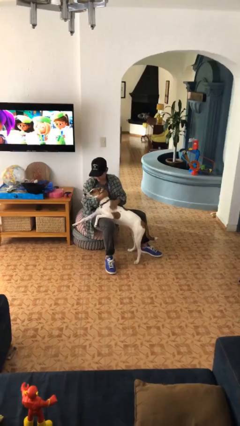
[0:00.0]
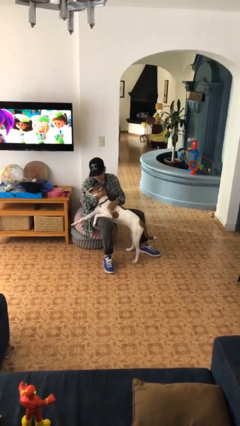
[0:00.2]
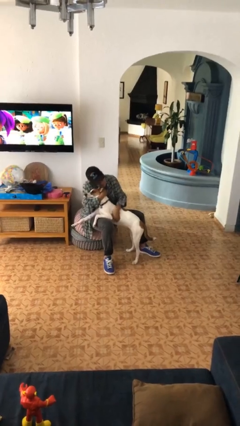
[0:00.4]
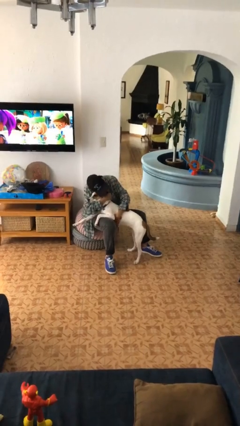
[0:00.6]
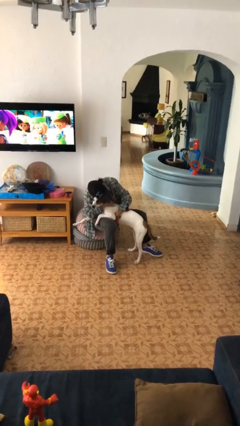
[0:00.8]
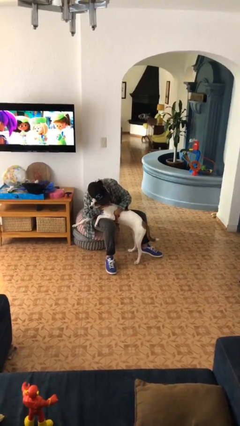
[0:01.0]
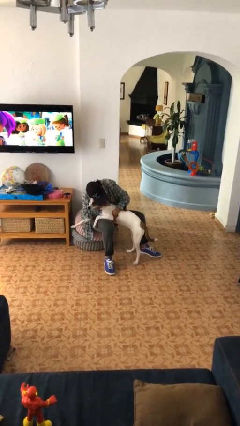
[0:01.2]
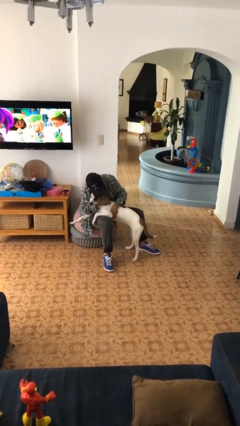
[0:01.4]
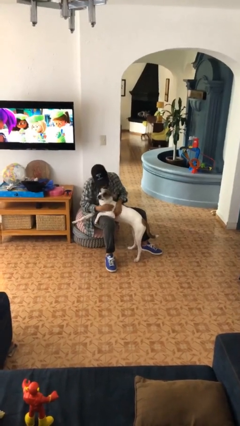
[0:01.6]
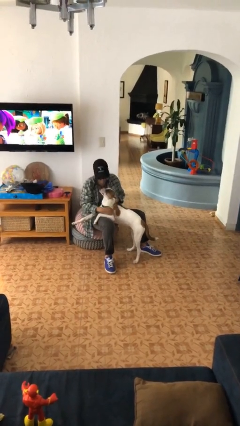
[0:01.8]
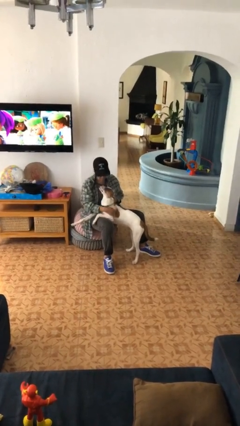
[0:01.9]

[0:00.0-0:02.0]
person hugs dog

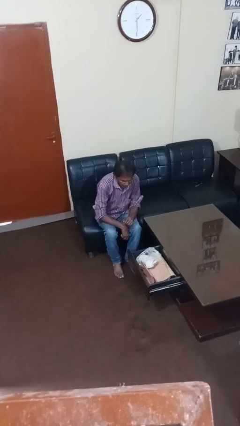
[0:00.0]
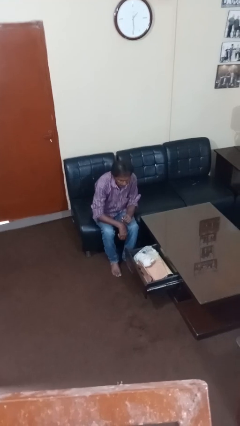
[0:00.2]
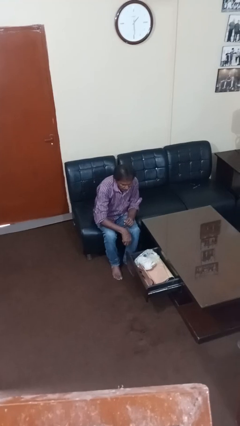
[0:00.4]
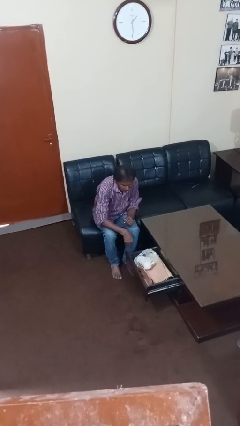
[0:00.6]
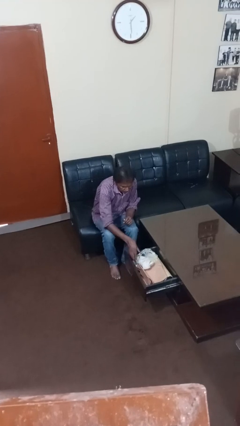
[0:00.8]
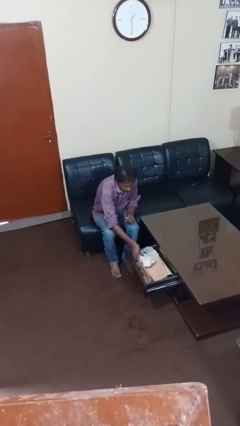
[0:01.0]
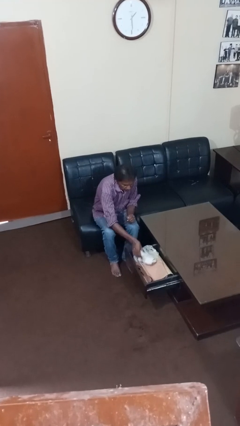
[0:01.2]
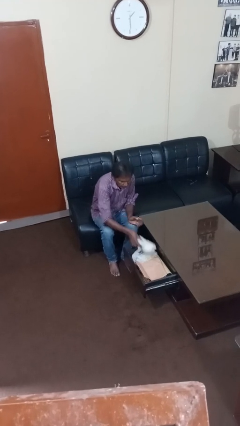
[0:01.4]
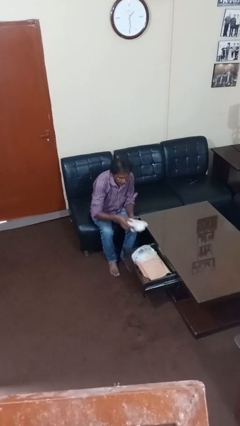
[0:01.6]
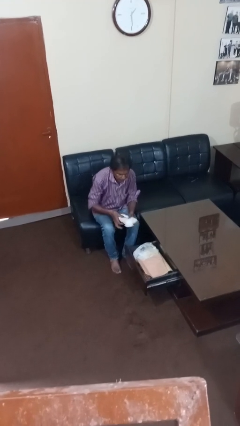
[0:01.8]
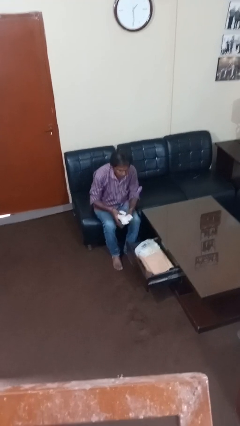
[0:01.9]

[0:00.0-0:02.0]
person takes clothes from dresser

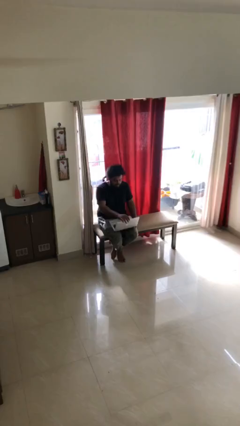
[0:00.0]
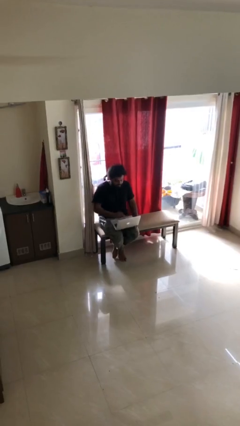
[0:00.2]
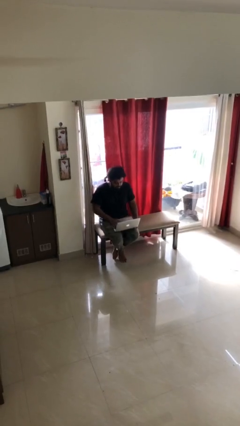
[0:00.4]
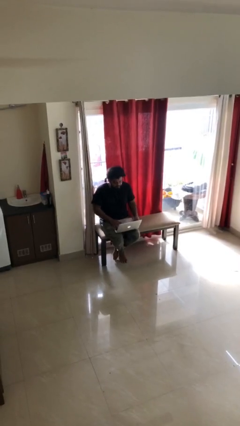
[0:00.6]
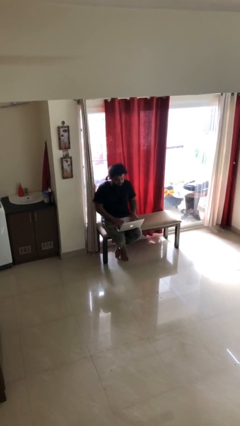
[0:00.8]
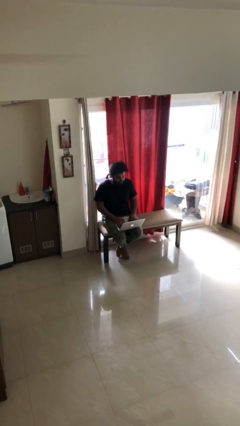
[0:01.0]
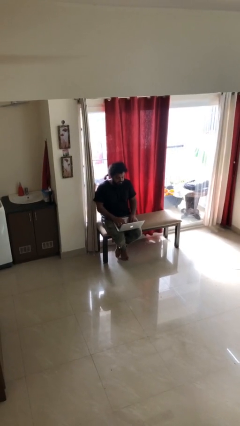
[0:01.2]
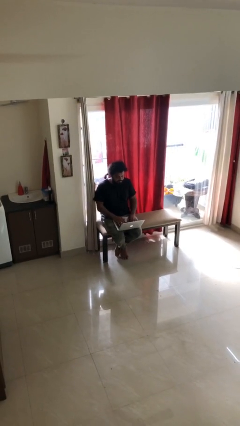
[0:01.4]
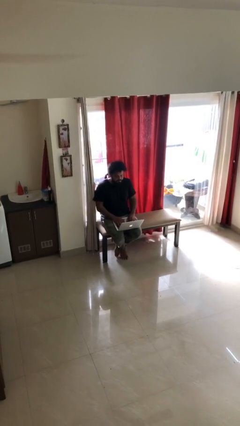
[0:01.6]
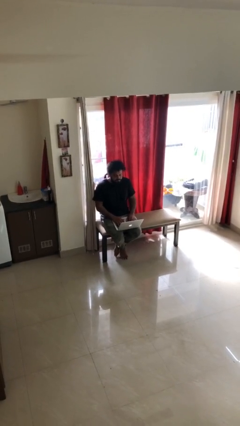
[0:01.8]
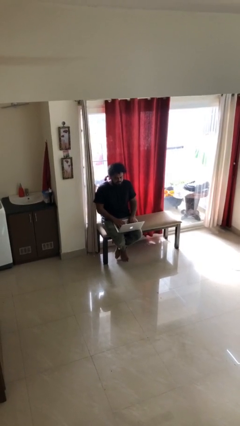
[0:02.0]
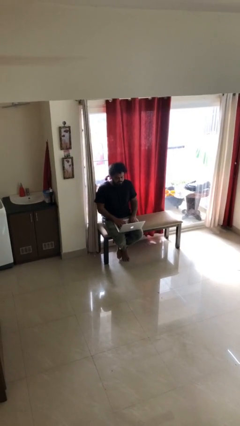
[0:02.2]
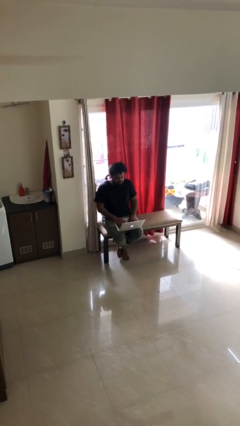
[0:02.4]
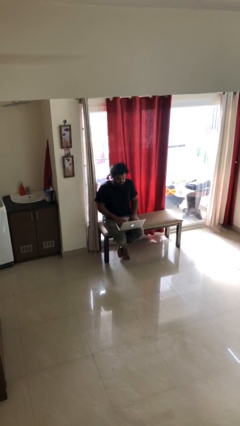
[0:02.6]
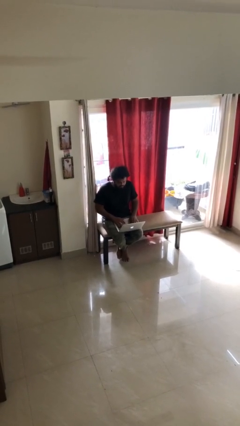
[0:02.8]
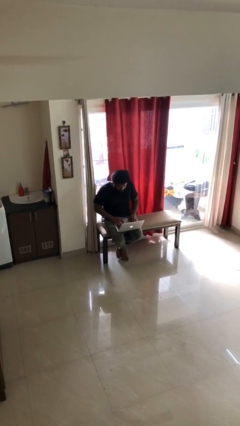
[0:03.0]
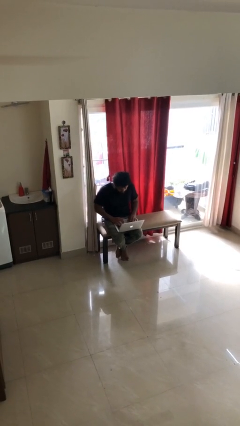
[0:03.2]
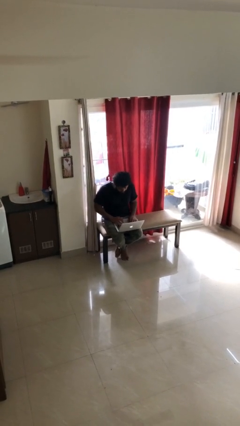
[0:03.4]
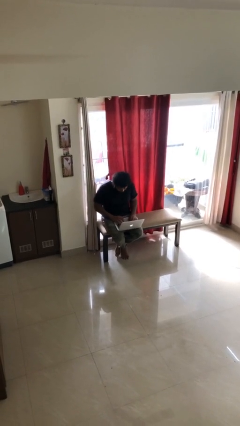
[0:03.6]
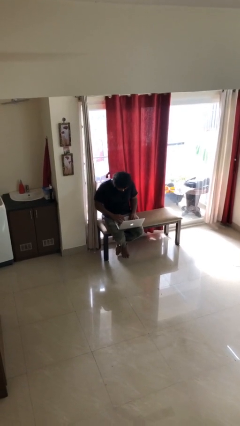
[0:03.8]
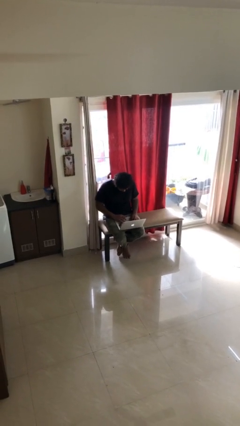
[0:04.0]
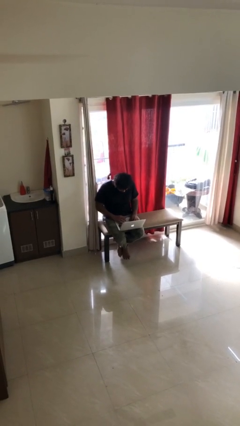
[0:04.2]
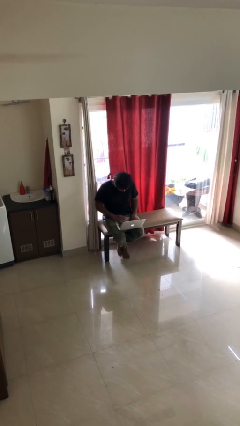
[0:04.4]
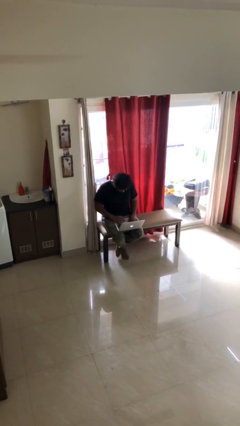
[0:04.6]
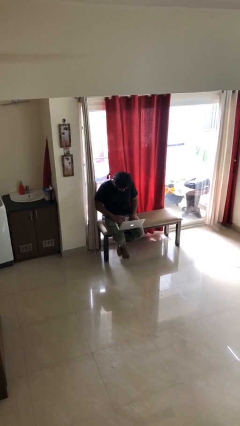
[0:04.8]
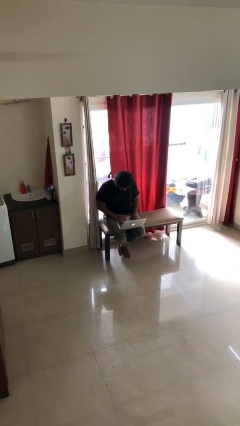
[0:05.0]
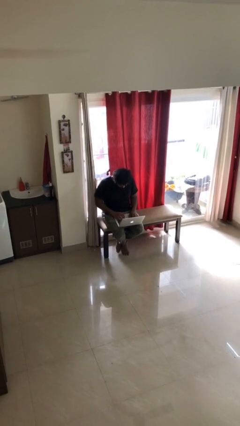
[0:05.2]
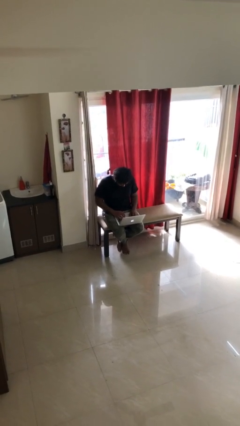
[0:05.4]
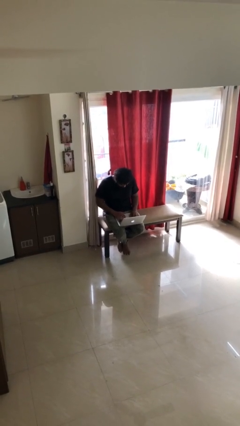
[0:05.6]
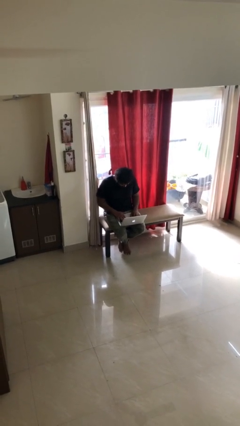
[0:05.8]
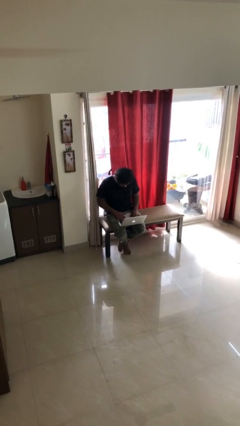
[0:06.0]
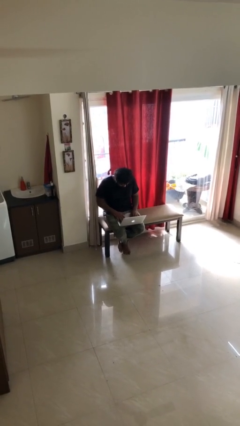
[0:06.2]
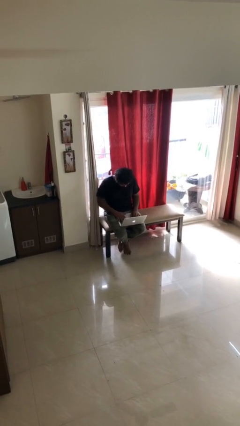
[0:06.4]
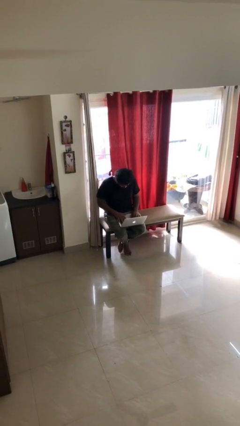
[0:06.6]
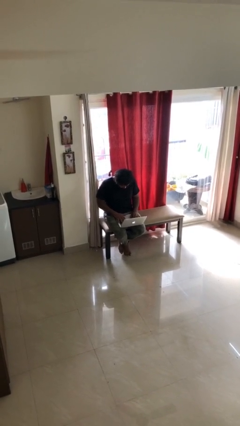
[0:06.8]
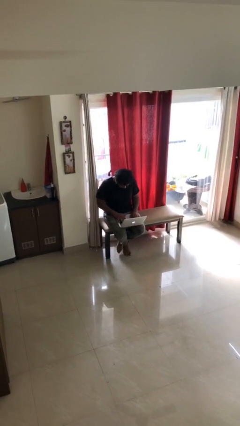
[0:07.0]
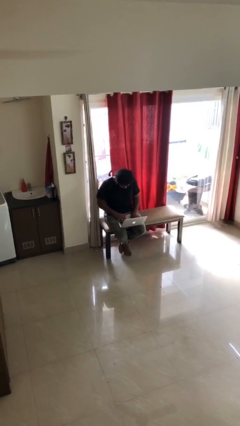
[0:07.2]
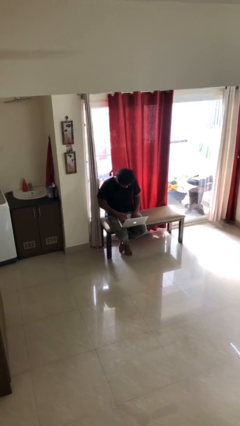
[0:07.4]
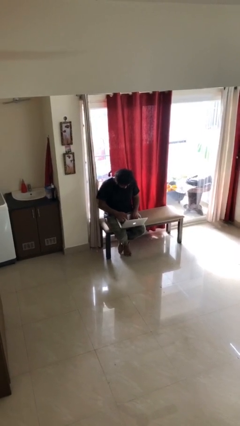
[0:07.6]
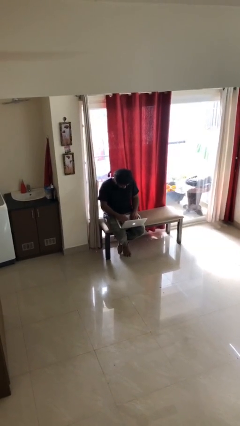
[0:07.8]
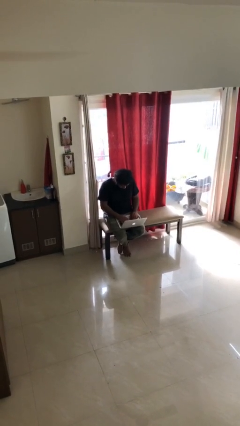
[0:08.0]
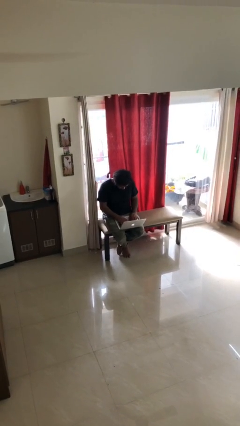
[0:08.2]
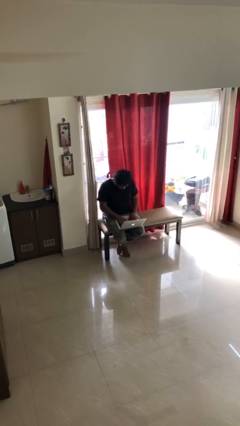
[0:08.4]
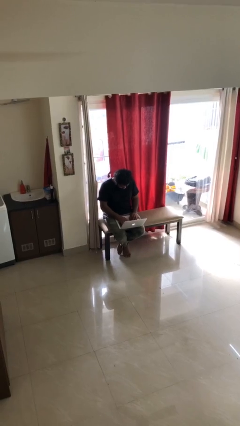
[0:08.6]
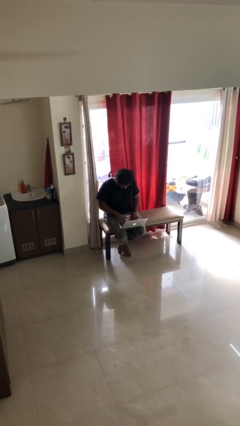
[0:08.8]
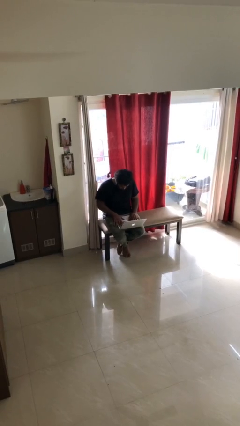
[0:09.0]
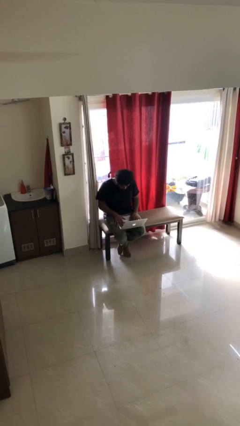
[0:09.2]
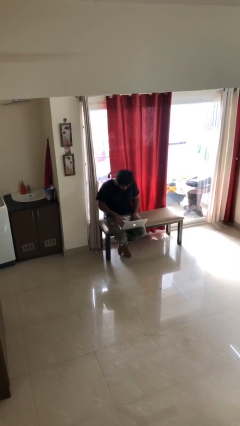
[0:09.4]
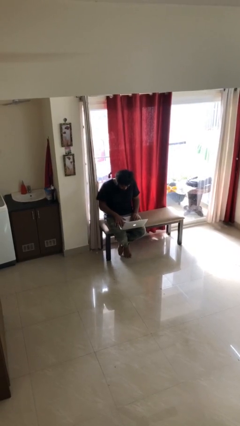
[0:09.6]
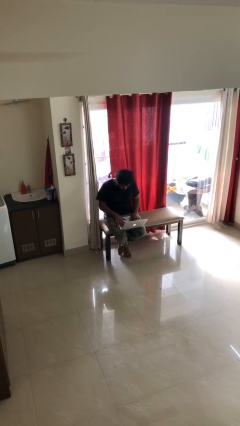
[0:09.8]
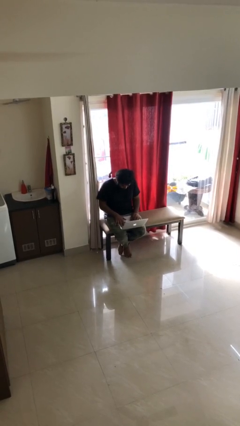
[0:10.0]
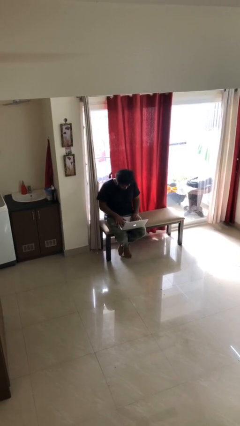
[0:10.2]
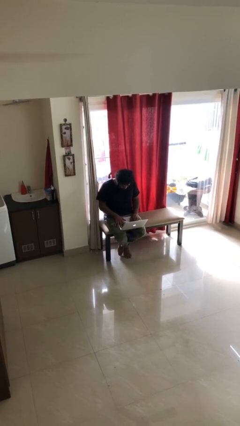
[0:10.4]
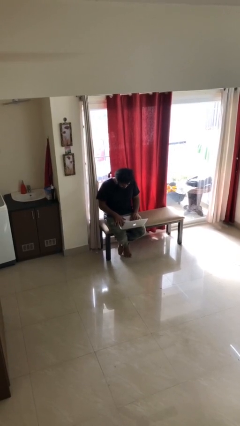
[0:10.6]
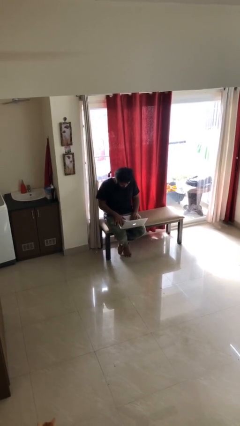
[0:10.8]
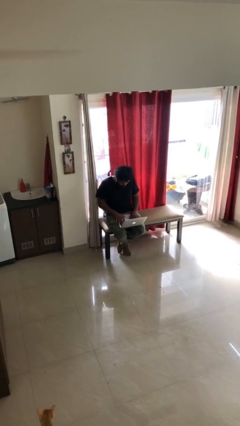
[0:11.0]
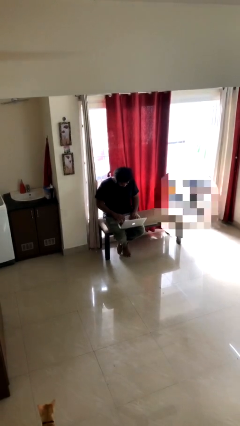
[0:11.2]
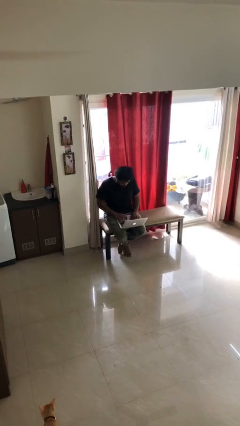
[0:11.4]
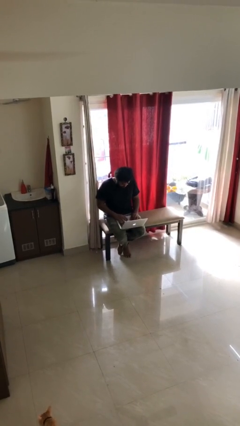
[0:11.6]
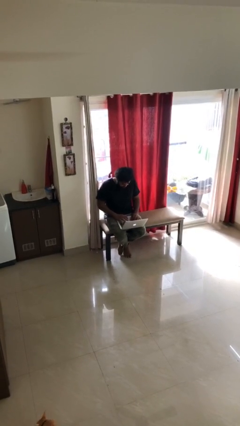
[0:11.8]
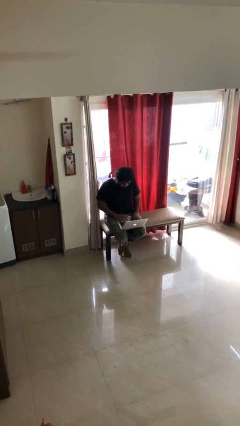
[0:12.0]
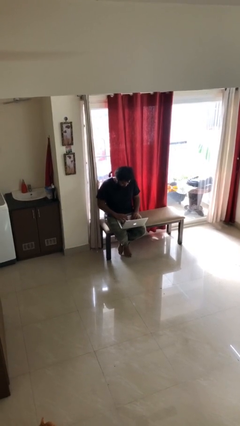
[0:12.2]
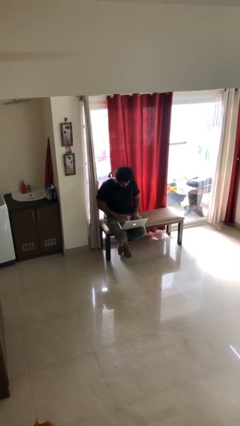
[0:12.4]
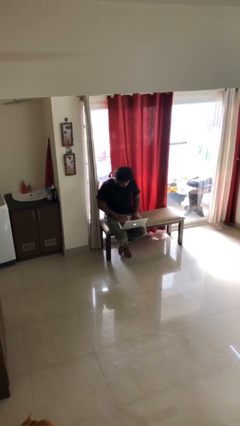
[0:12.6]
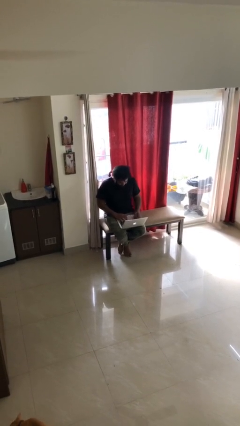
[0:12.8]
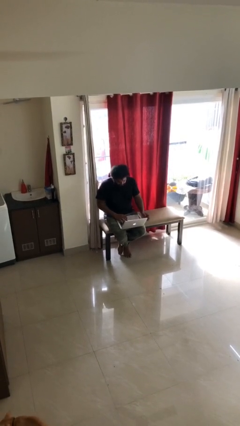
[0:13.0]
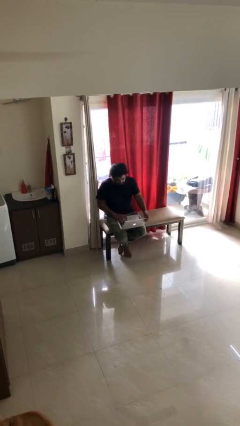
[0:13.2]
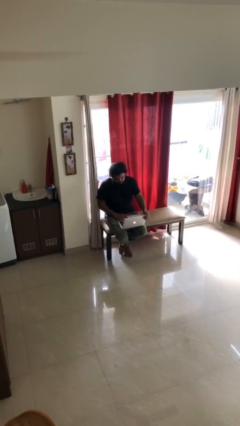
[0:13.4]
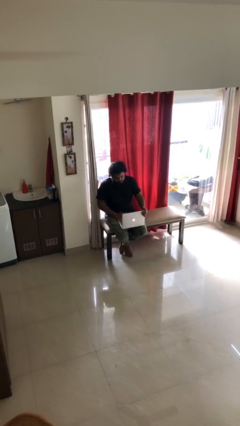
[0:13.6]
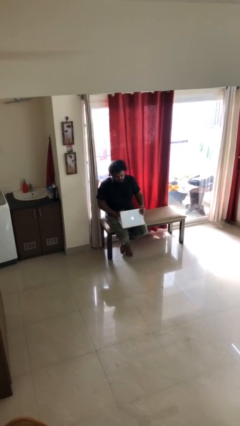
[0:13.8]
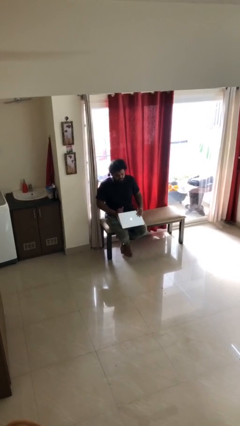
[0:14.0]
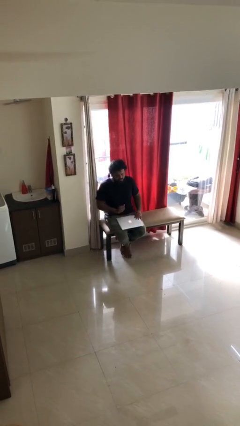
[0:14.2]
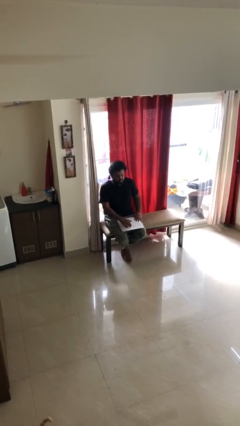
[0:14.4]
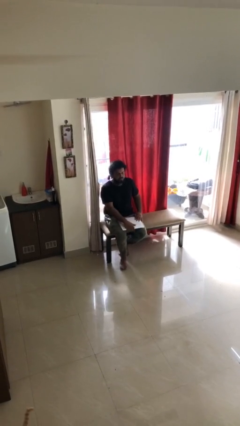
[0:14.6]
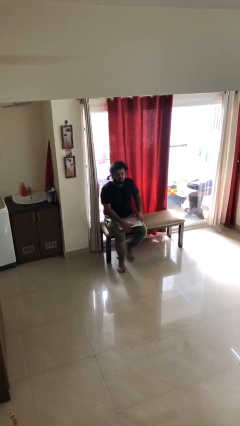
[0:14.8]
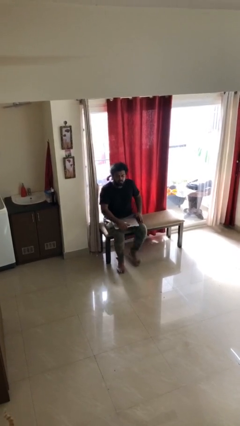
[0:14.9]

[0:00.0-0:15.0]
person interacts with laptop
